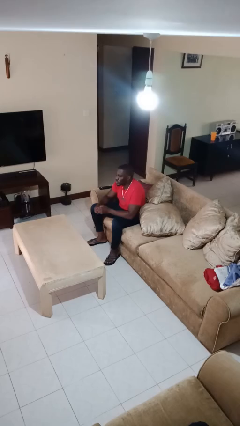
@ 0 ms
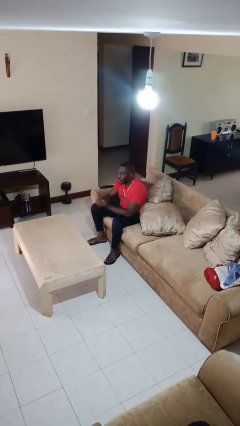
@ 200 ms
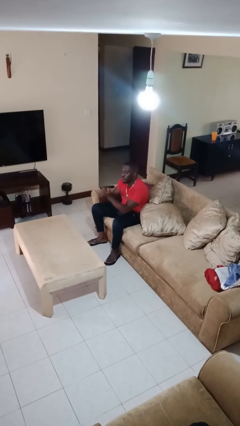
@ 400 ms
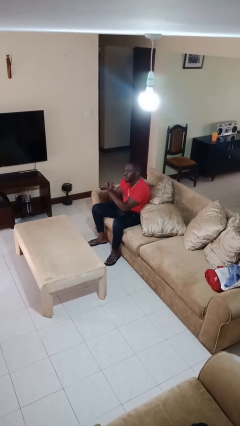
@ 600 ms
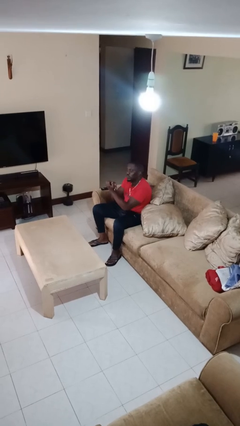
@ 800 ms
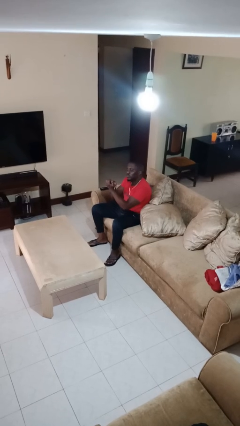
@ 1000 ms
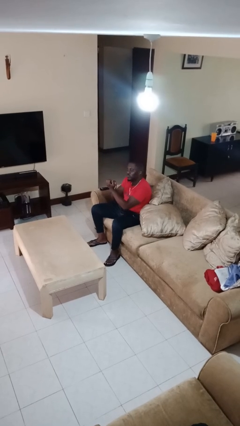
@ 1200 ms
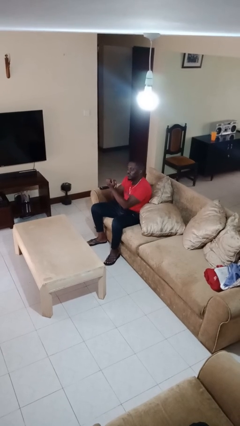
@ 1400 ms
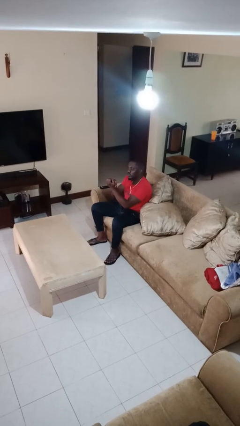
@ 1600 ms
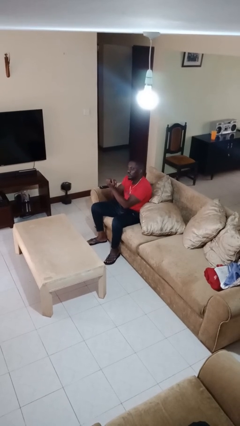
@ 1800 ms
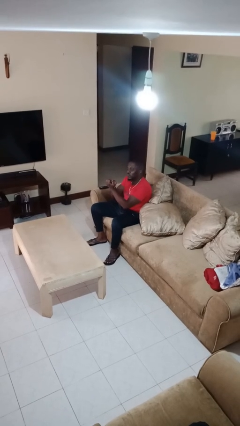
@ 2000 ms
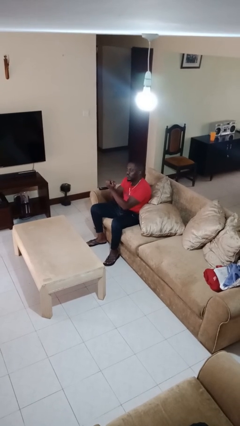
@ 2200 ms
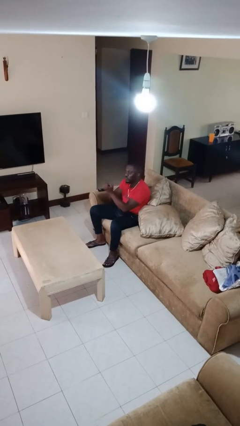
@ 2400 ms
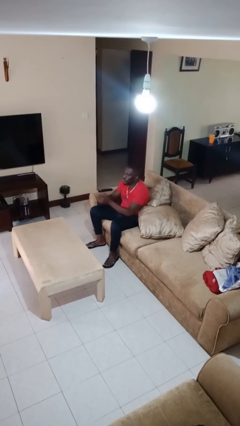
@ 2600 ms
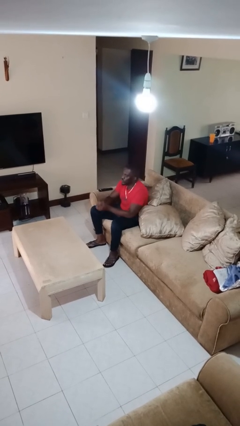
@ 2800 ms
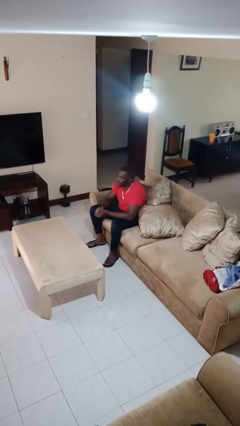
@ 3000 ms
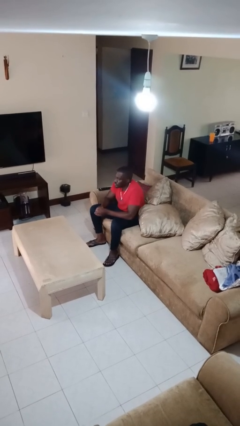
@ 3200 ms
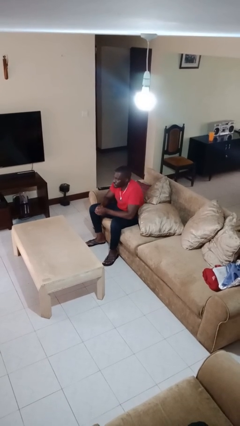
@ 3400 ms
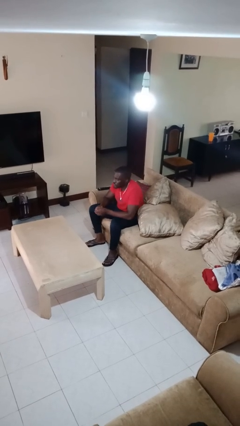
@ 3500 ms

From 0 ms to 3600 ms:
person clips fingernails

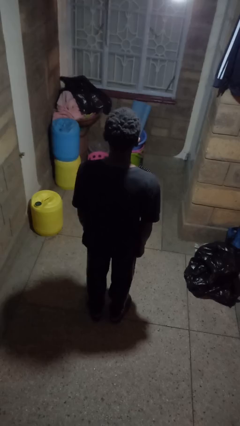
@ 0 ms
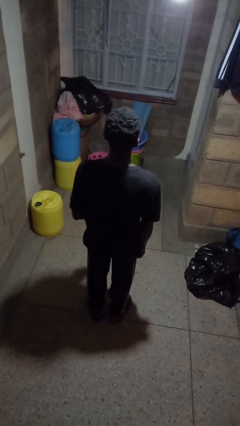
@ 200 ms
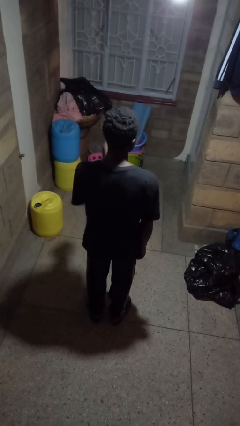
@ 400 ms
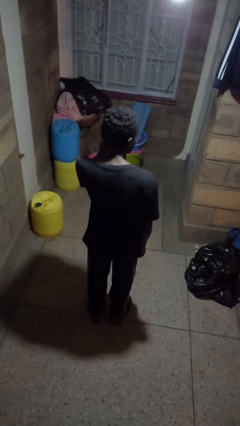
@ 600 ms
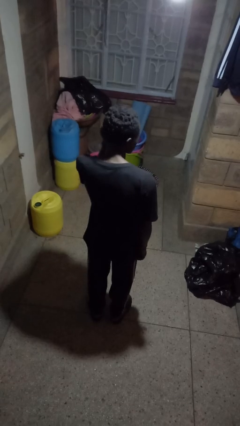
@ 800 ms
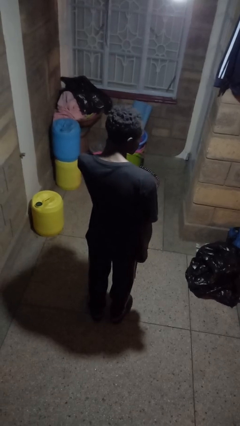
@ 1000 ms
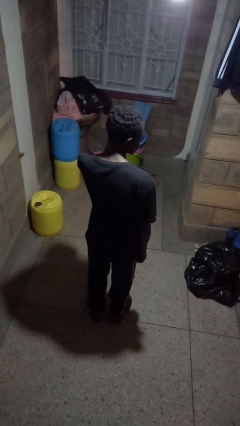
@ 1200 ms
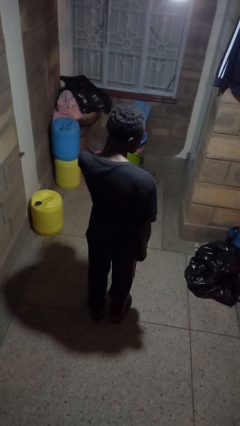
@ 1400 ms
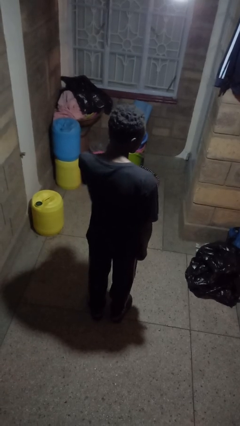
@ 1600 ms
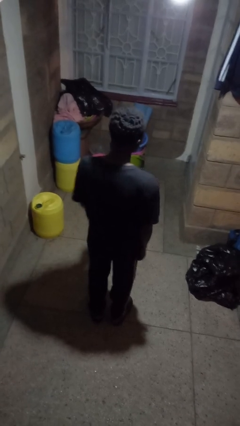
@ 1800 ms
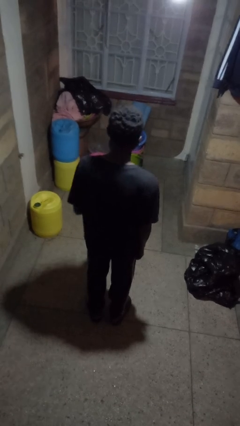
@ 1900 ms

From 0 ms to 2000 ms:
person touches earlobe

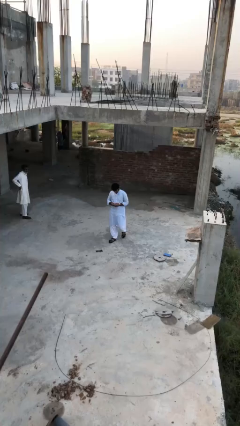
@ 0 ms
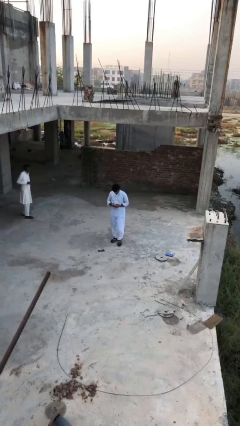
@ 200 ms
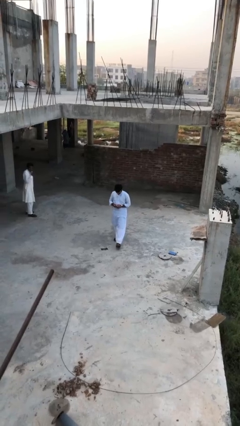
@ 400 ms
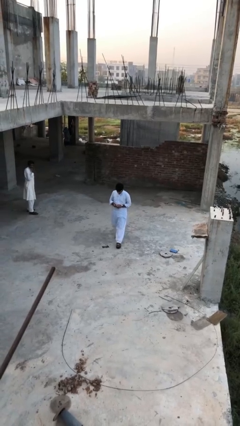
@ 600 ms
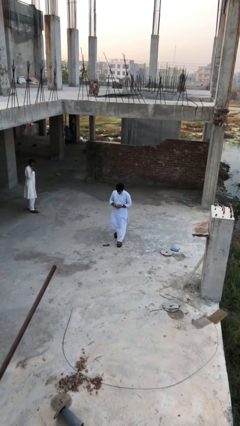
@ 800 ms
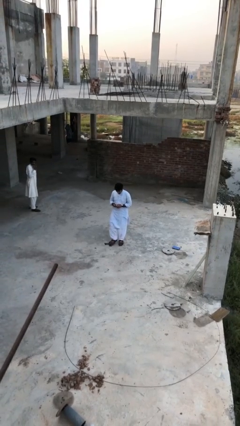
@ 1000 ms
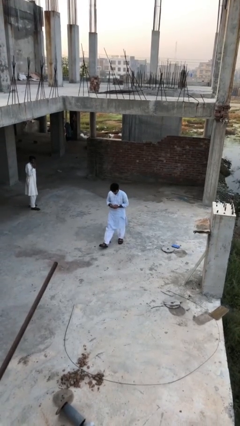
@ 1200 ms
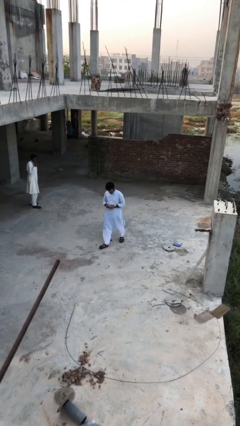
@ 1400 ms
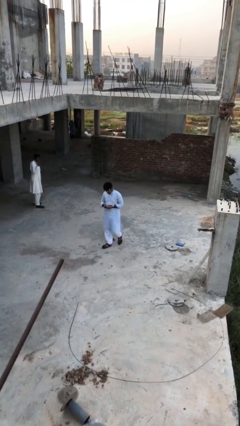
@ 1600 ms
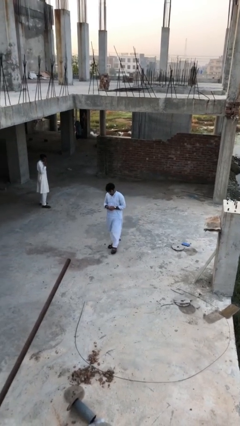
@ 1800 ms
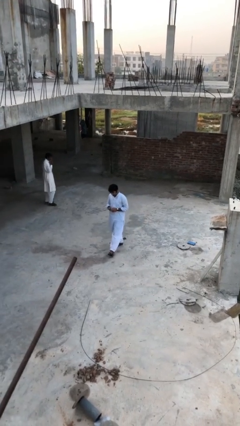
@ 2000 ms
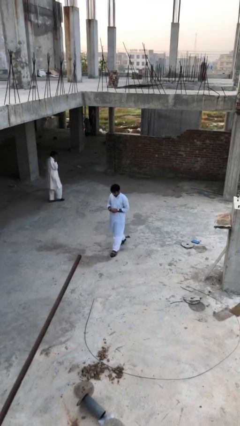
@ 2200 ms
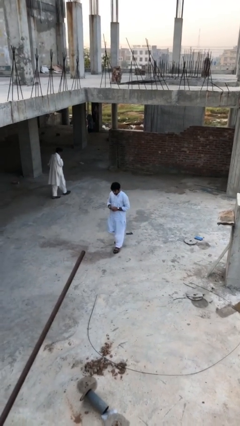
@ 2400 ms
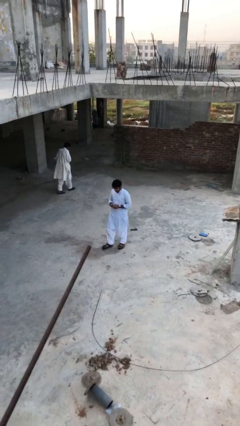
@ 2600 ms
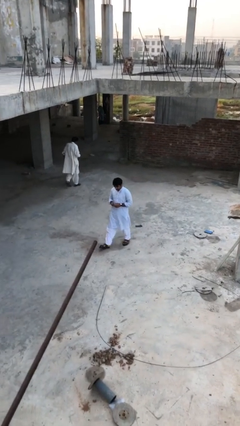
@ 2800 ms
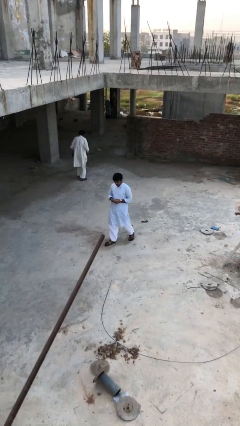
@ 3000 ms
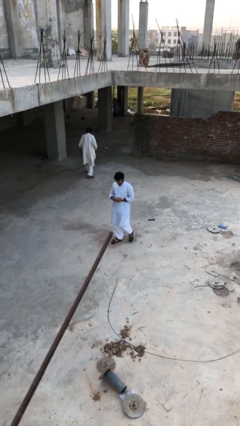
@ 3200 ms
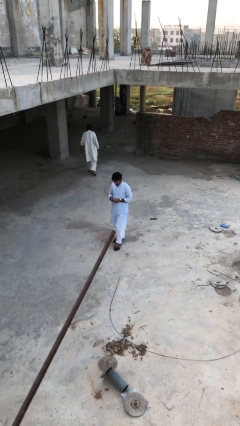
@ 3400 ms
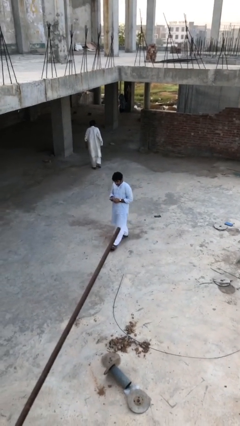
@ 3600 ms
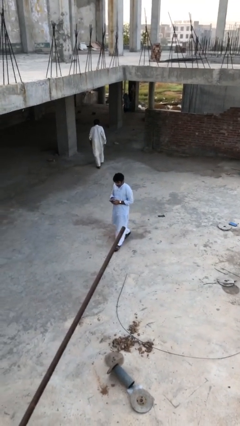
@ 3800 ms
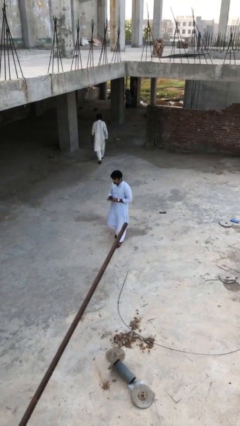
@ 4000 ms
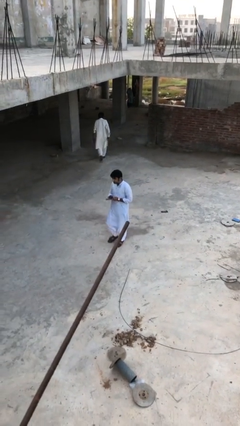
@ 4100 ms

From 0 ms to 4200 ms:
person texts on phone

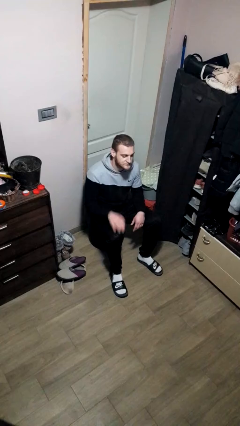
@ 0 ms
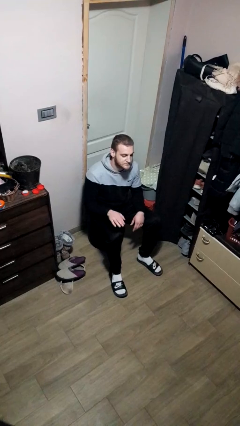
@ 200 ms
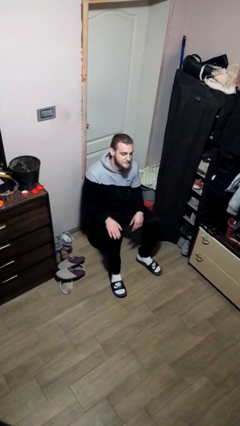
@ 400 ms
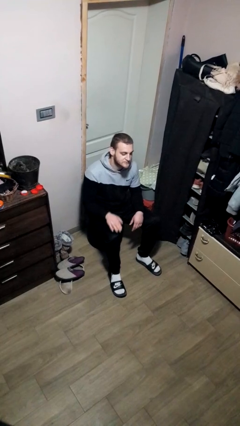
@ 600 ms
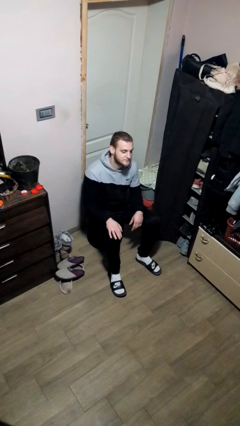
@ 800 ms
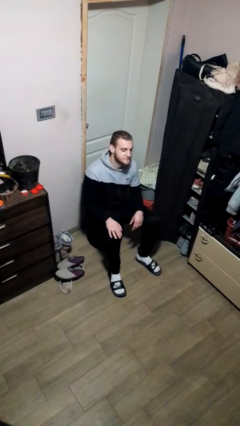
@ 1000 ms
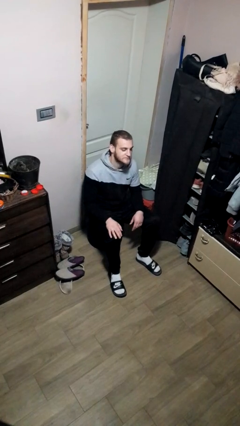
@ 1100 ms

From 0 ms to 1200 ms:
person slaps hands on thighs

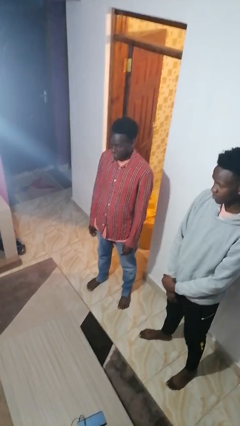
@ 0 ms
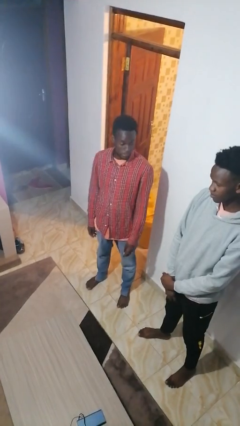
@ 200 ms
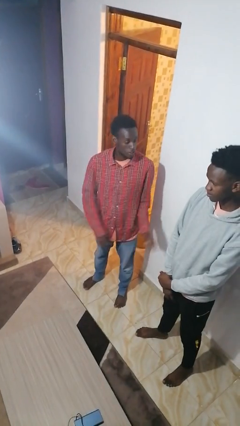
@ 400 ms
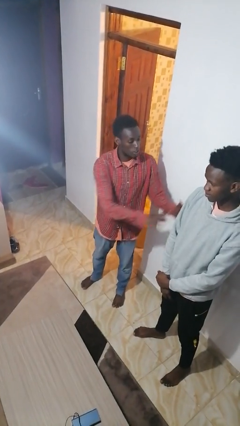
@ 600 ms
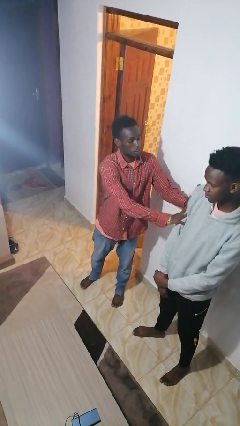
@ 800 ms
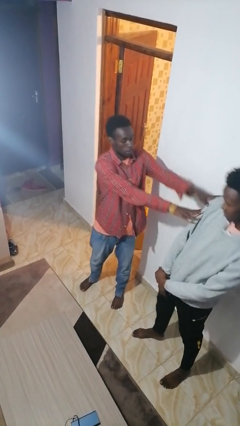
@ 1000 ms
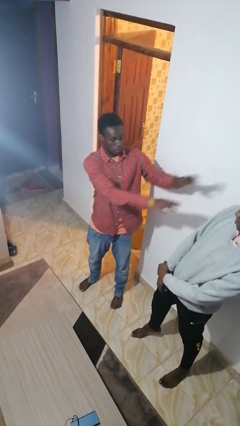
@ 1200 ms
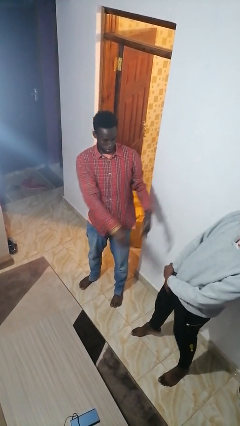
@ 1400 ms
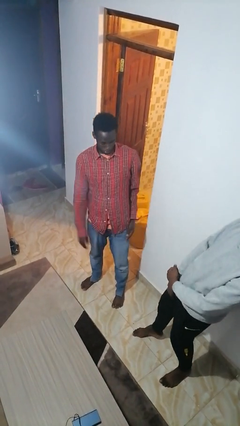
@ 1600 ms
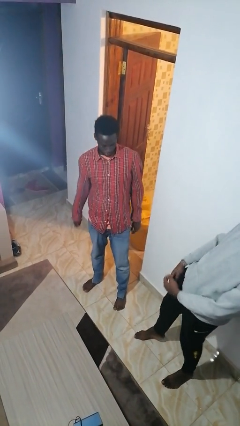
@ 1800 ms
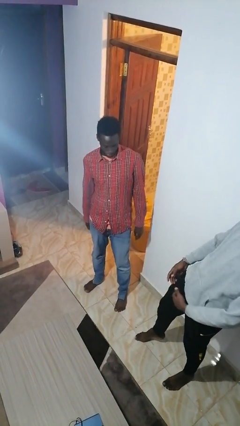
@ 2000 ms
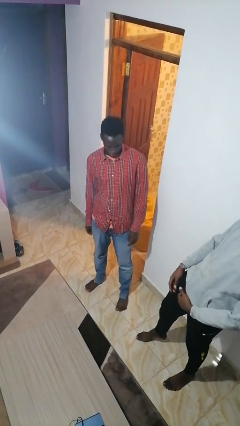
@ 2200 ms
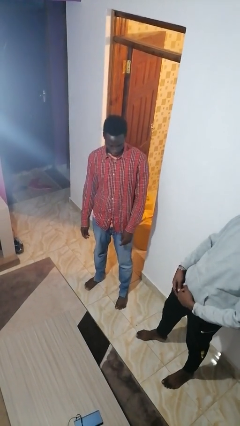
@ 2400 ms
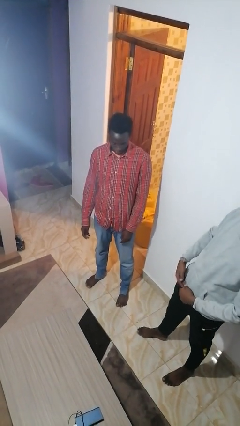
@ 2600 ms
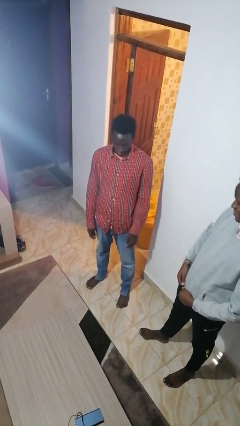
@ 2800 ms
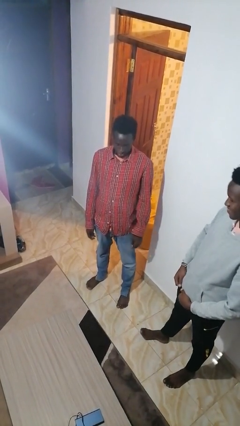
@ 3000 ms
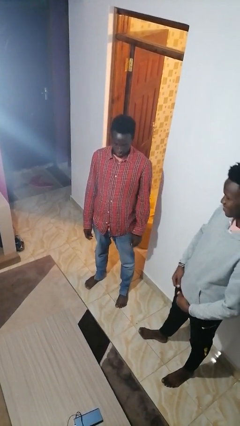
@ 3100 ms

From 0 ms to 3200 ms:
person shoves person

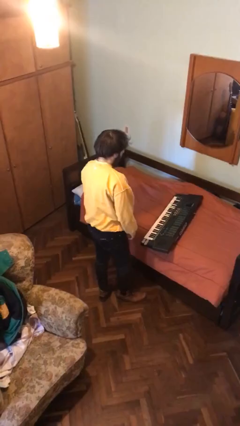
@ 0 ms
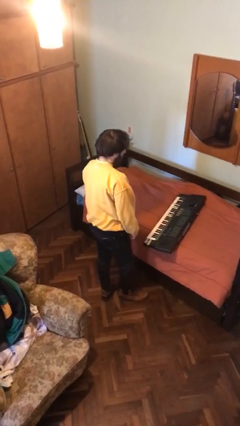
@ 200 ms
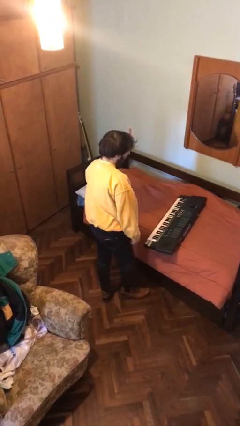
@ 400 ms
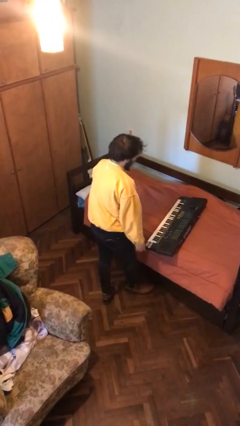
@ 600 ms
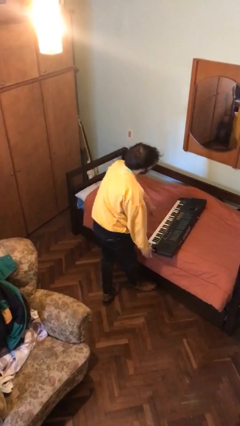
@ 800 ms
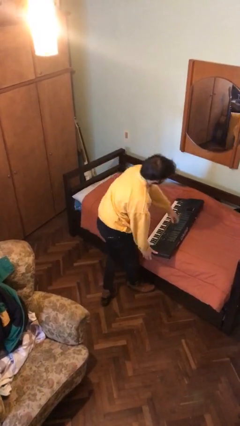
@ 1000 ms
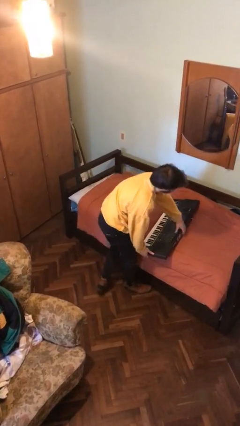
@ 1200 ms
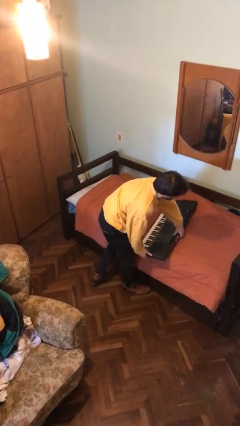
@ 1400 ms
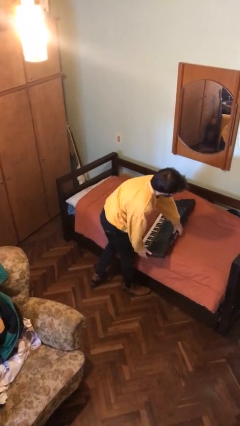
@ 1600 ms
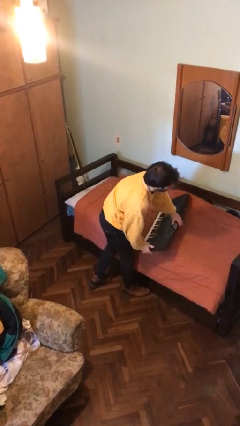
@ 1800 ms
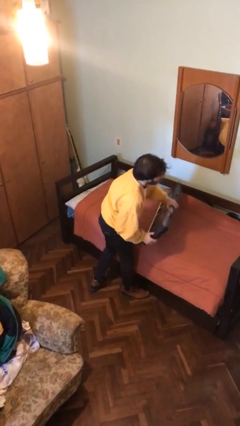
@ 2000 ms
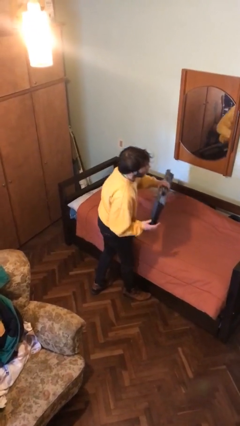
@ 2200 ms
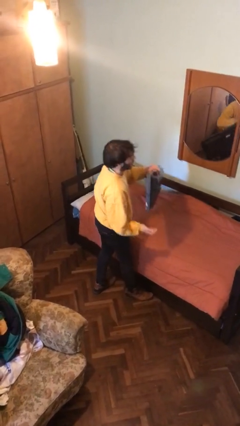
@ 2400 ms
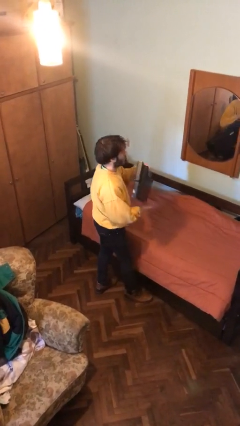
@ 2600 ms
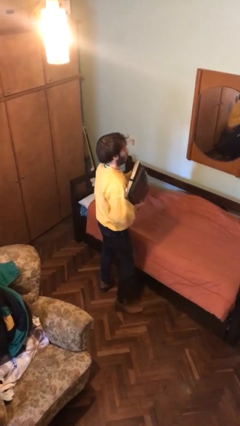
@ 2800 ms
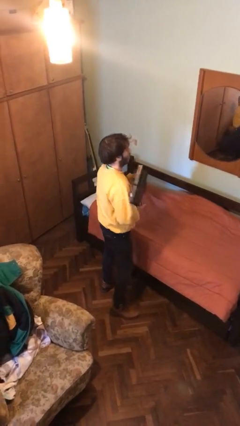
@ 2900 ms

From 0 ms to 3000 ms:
person picks up object from bed
